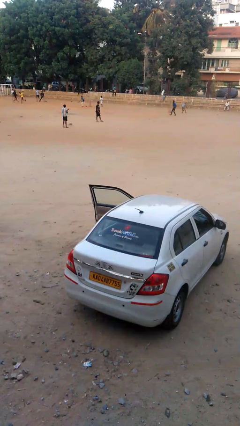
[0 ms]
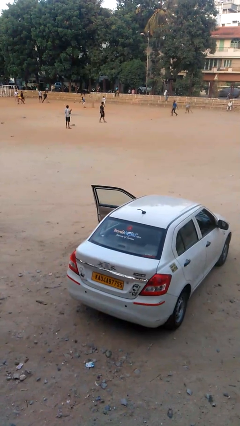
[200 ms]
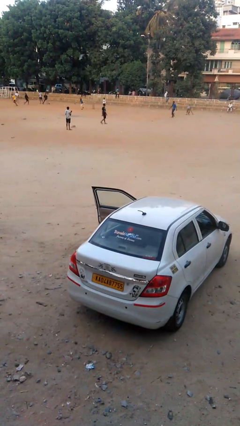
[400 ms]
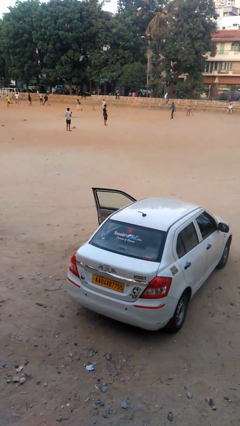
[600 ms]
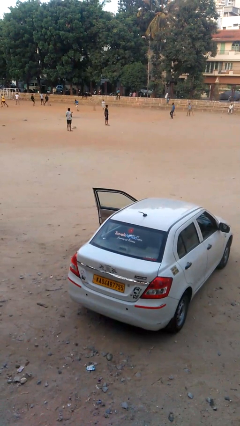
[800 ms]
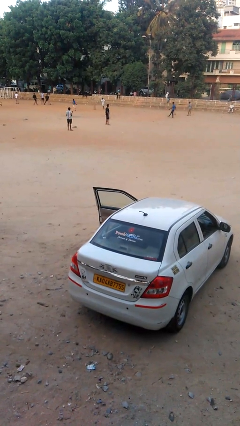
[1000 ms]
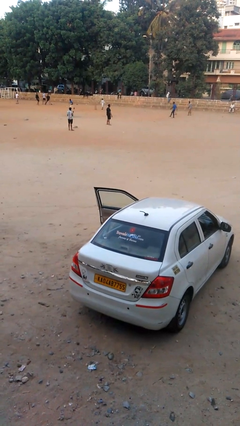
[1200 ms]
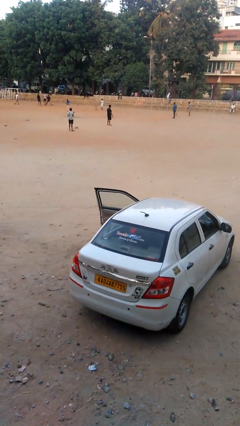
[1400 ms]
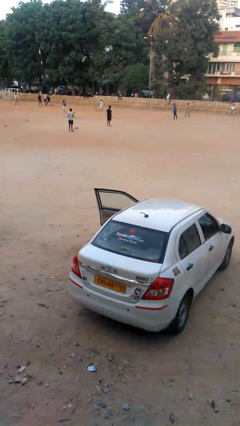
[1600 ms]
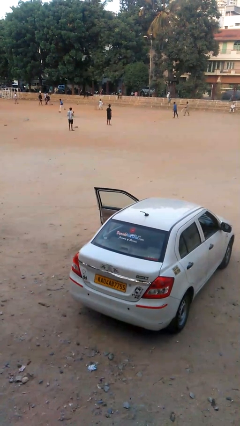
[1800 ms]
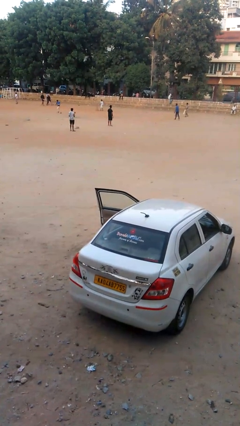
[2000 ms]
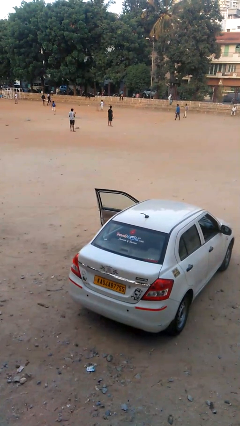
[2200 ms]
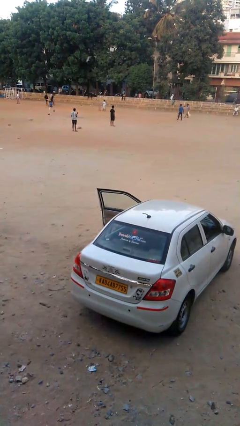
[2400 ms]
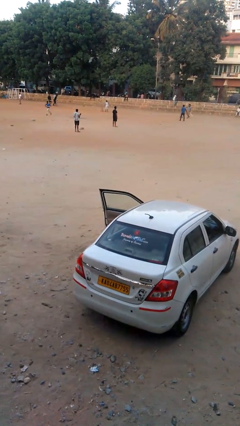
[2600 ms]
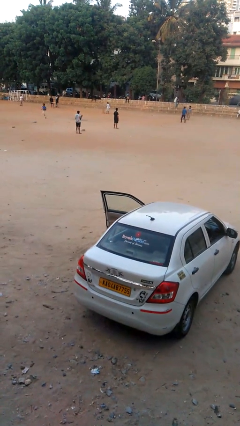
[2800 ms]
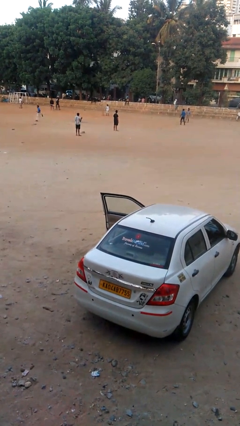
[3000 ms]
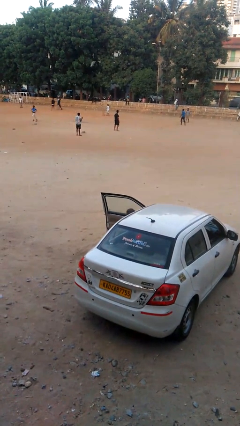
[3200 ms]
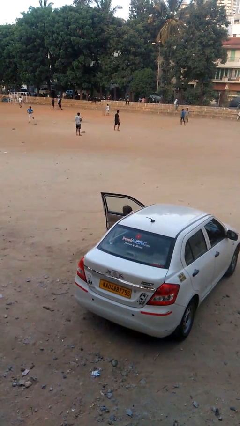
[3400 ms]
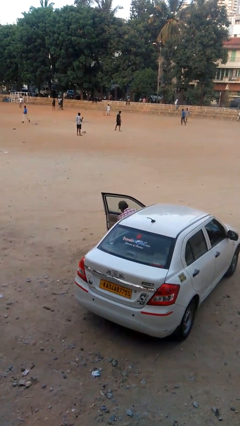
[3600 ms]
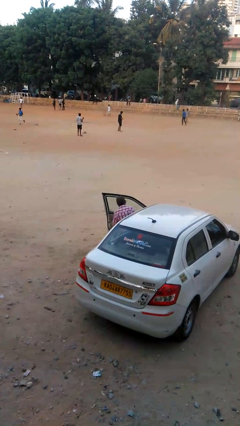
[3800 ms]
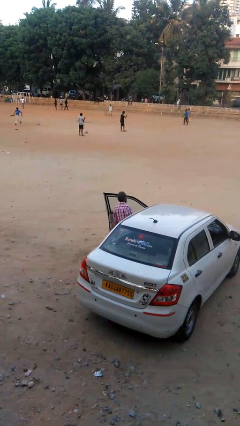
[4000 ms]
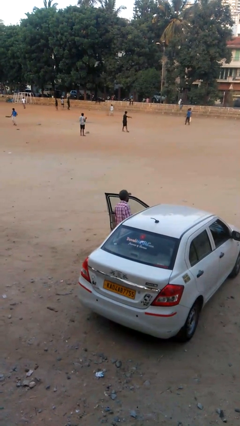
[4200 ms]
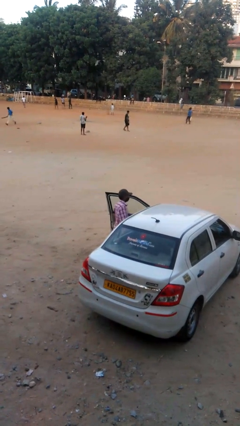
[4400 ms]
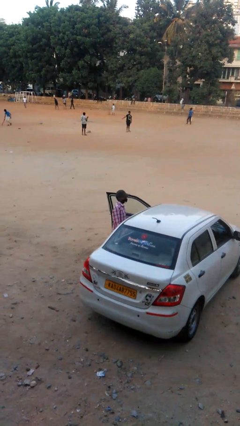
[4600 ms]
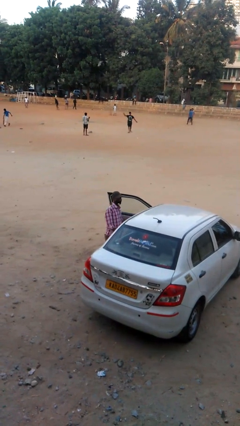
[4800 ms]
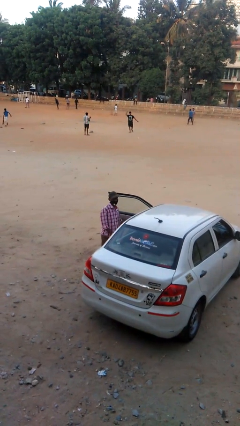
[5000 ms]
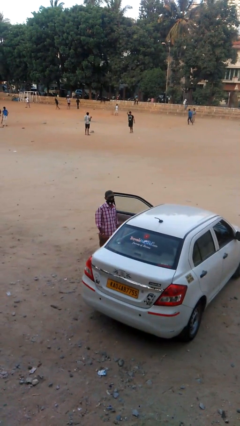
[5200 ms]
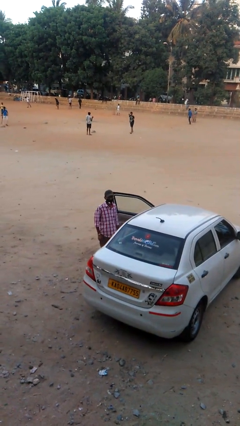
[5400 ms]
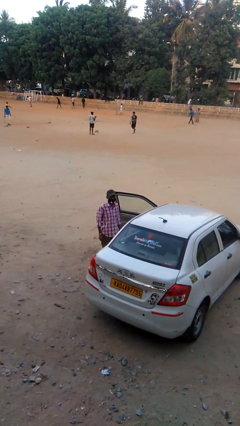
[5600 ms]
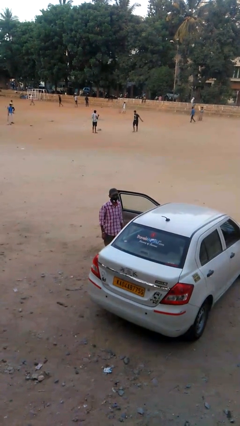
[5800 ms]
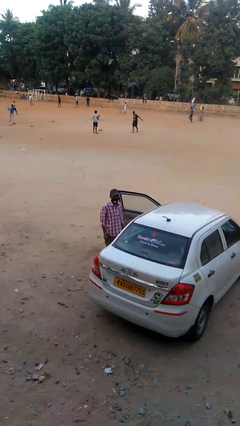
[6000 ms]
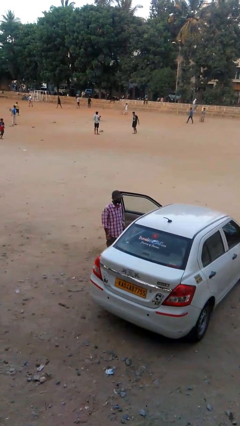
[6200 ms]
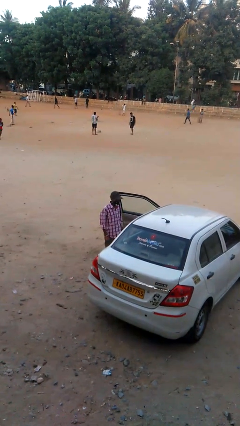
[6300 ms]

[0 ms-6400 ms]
person exits car

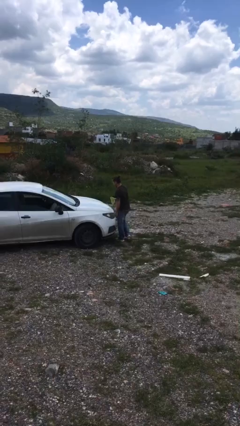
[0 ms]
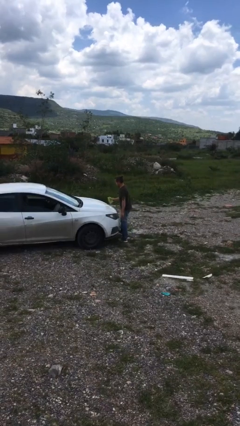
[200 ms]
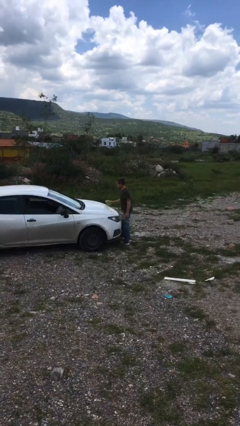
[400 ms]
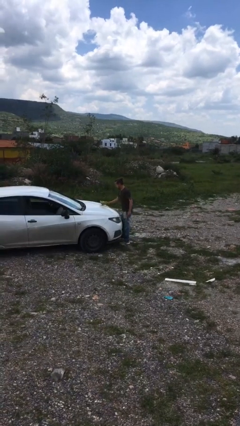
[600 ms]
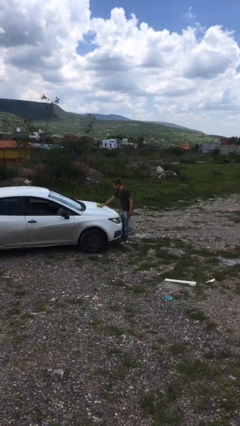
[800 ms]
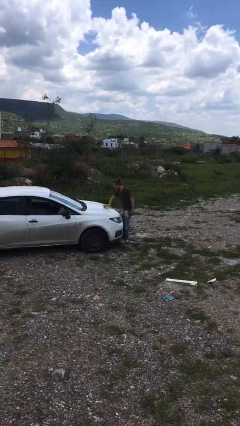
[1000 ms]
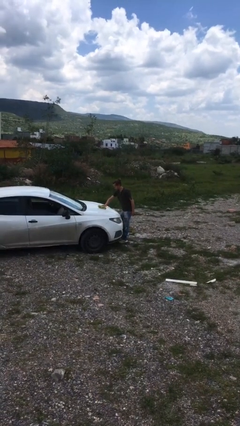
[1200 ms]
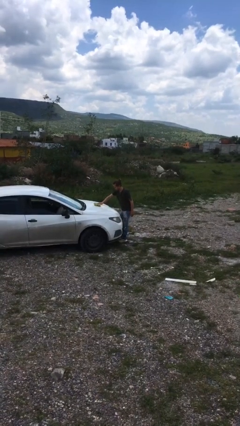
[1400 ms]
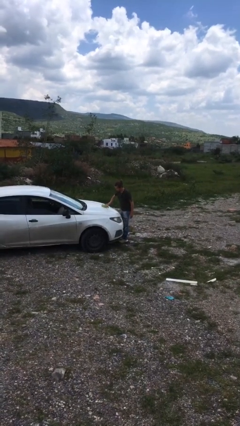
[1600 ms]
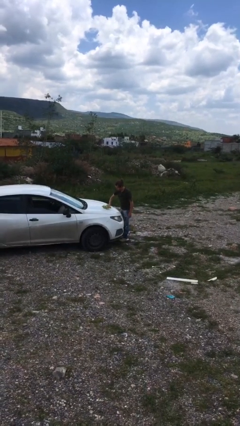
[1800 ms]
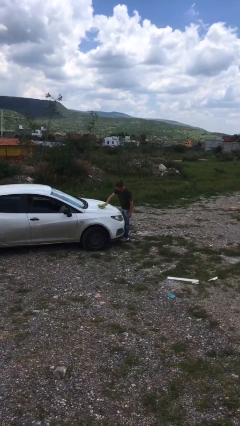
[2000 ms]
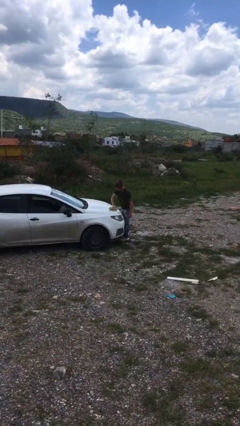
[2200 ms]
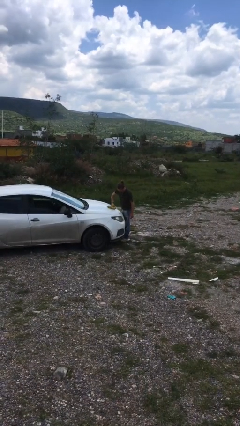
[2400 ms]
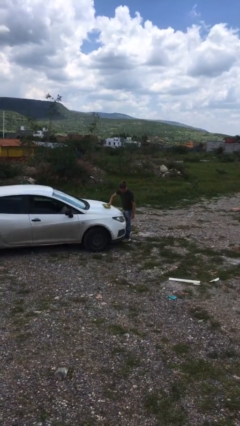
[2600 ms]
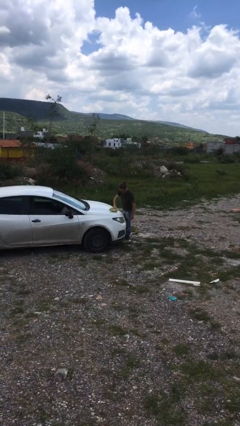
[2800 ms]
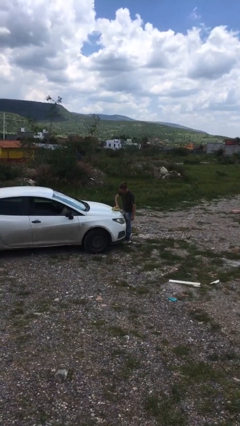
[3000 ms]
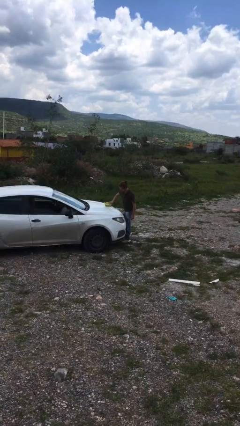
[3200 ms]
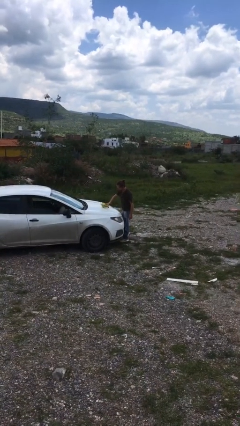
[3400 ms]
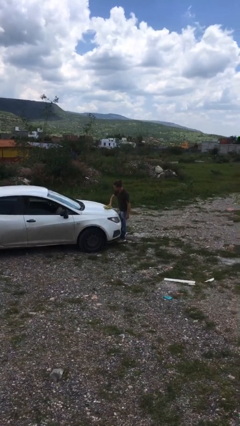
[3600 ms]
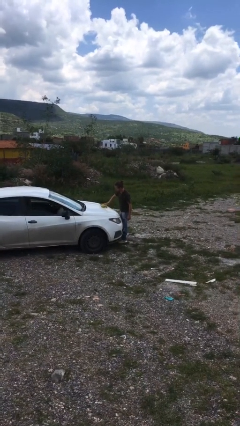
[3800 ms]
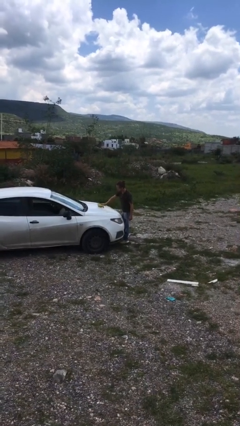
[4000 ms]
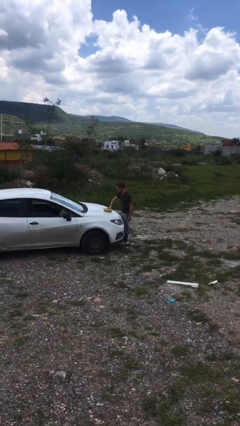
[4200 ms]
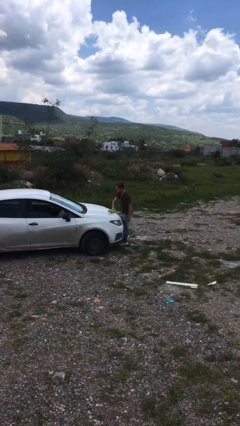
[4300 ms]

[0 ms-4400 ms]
person polishes car with rag

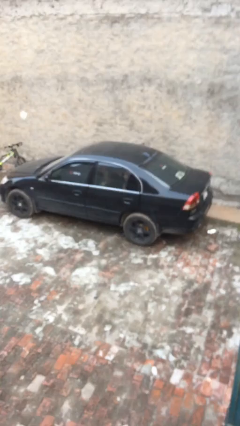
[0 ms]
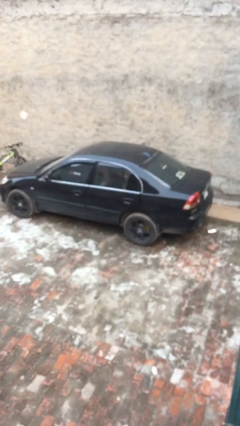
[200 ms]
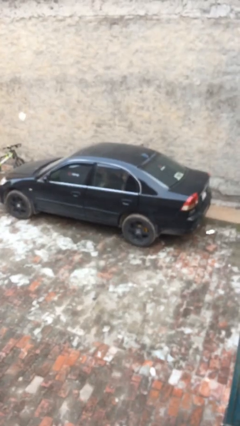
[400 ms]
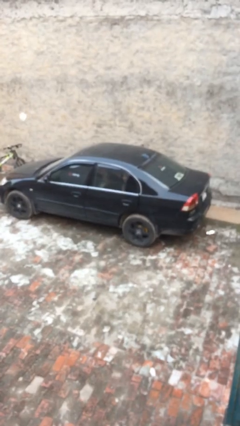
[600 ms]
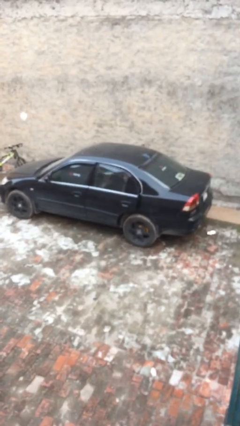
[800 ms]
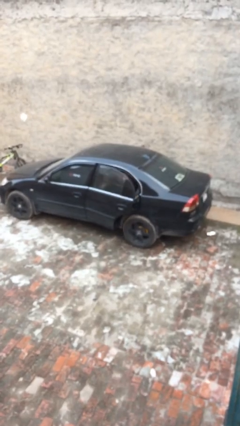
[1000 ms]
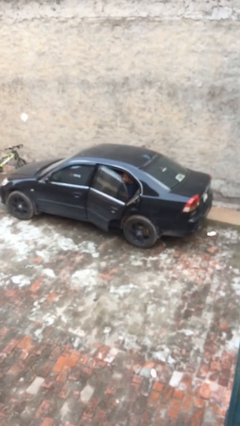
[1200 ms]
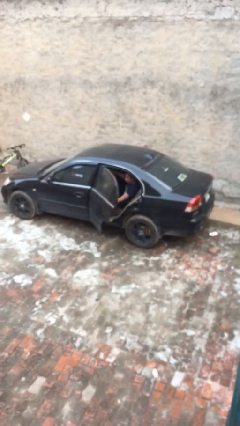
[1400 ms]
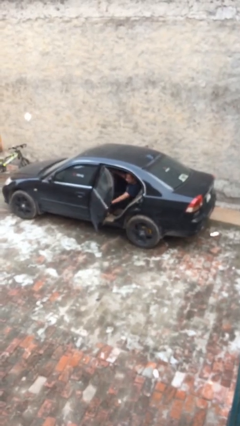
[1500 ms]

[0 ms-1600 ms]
person opens car door

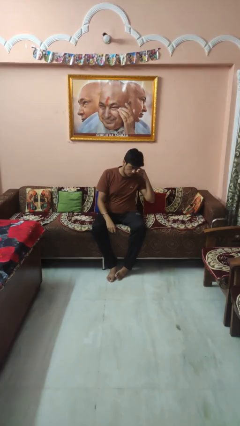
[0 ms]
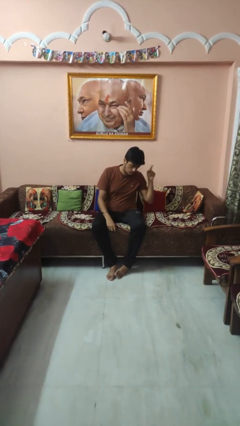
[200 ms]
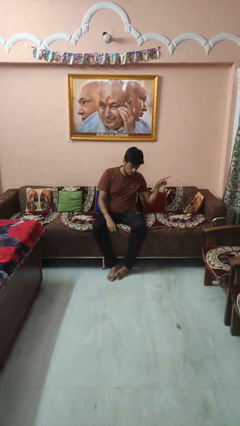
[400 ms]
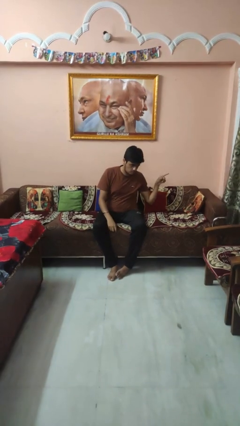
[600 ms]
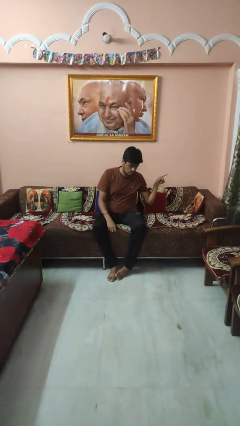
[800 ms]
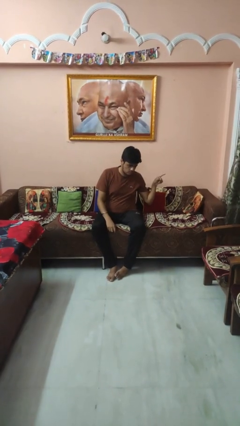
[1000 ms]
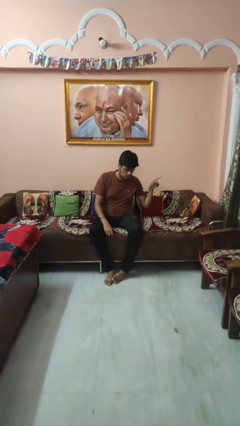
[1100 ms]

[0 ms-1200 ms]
person gestures listen closely

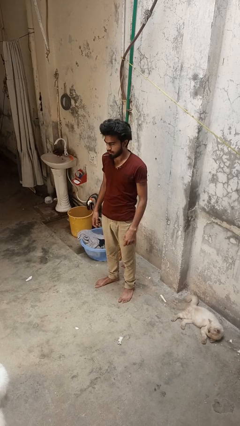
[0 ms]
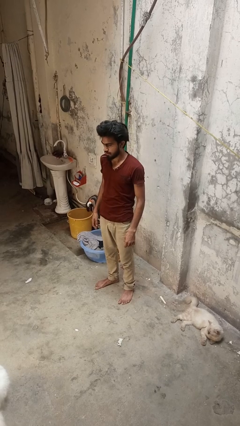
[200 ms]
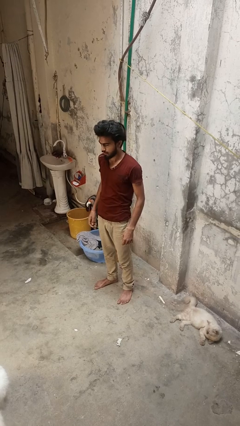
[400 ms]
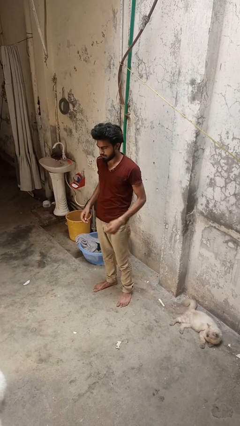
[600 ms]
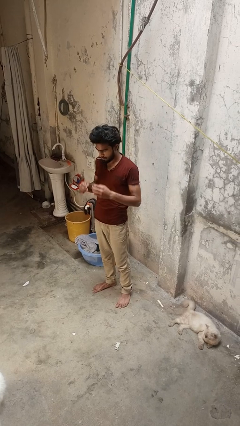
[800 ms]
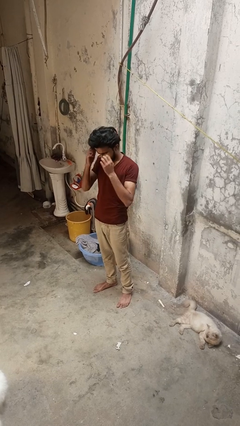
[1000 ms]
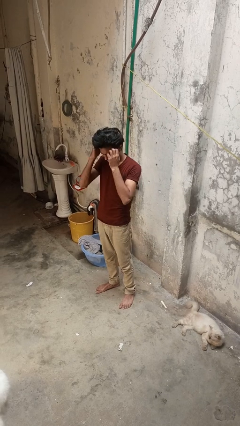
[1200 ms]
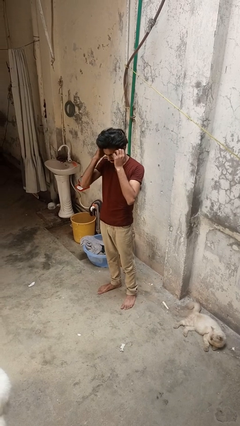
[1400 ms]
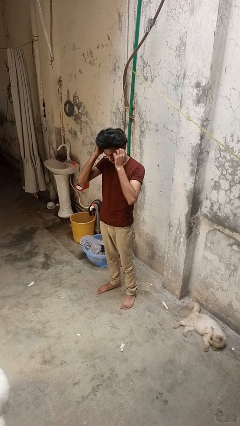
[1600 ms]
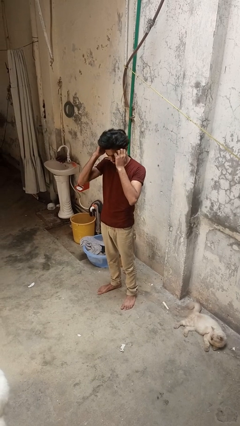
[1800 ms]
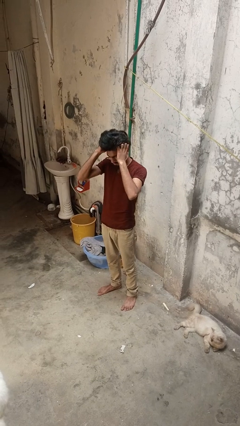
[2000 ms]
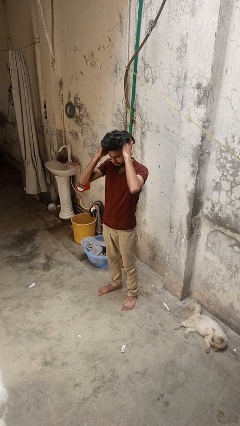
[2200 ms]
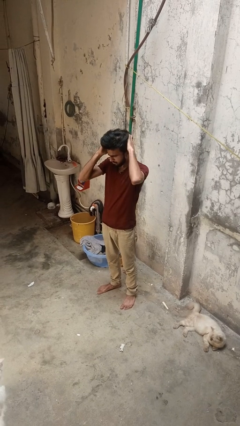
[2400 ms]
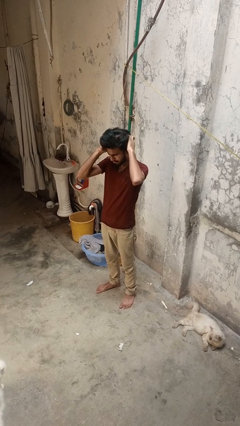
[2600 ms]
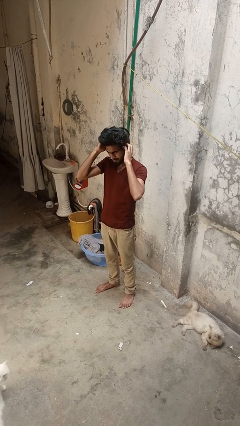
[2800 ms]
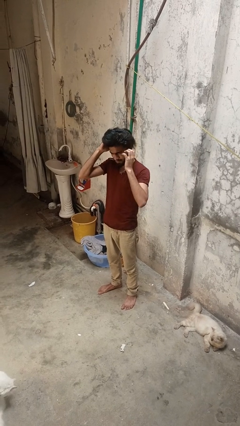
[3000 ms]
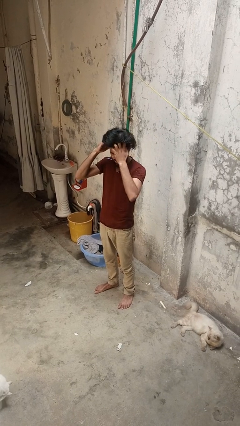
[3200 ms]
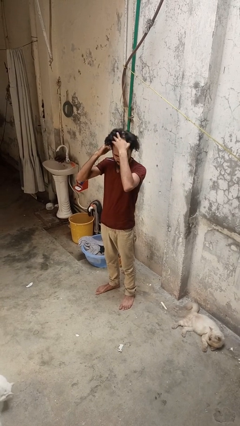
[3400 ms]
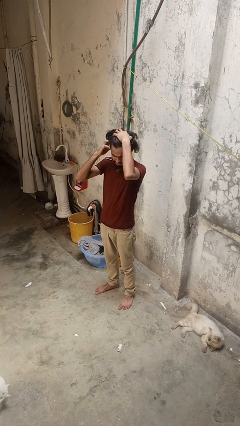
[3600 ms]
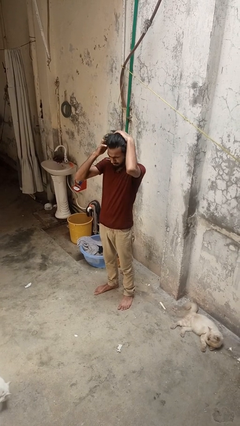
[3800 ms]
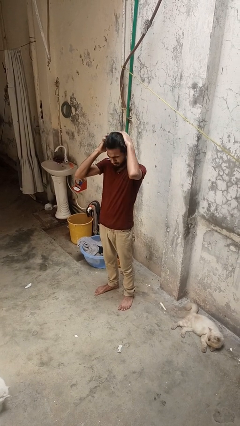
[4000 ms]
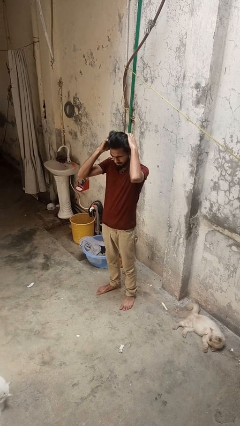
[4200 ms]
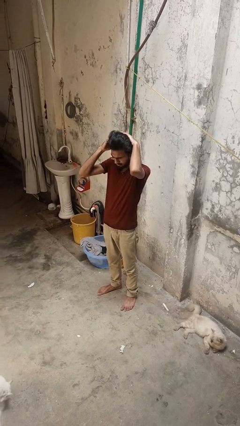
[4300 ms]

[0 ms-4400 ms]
person scratches face
